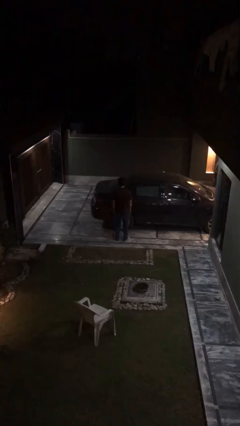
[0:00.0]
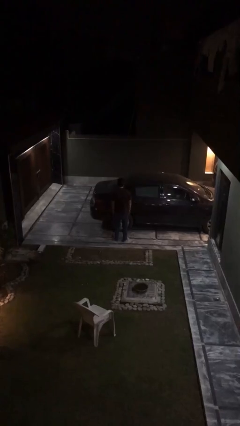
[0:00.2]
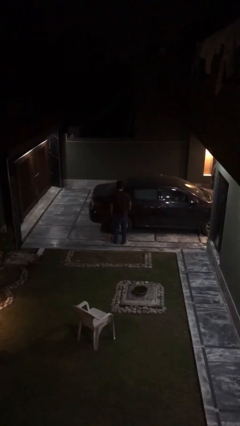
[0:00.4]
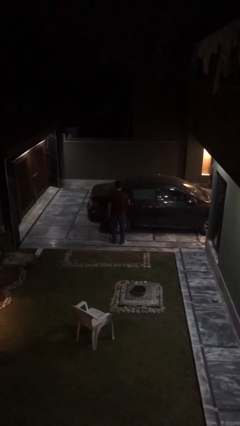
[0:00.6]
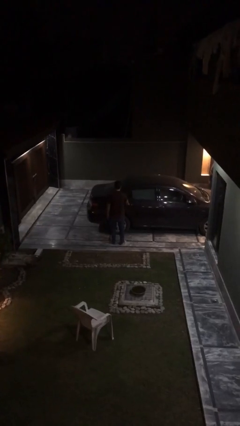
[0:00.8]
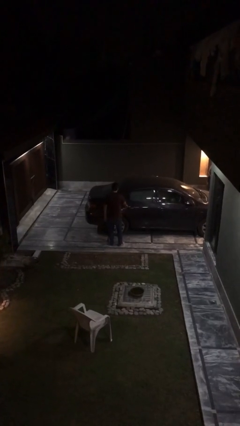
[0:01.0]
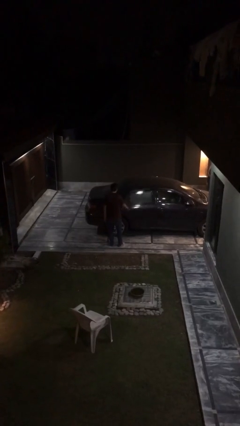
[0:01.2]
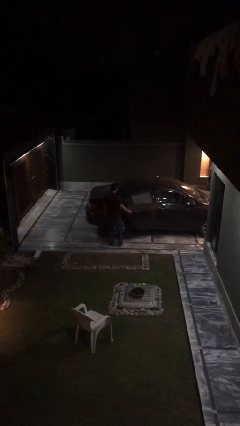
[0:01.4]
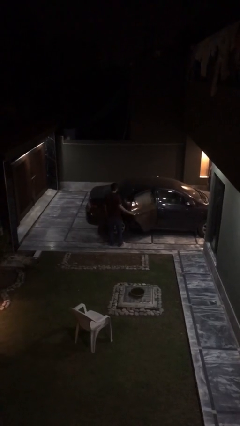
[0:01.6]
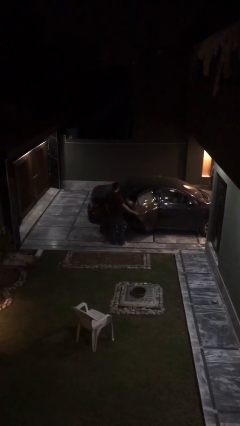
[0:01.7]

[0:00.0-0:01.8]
person opens car door

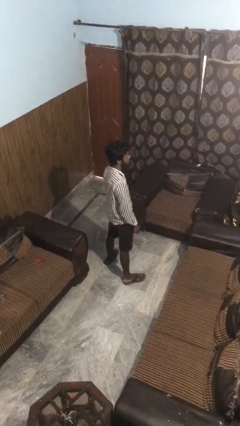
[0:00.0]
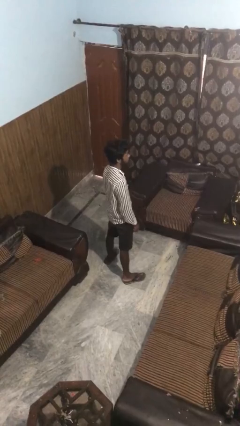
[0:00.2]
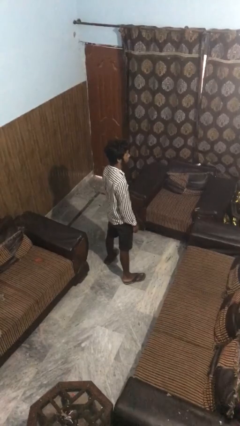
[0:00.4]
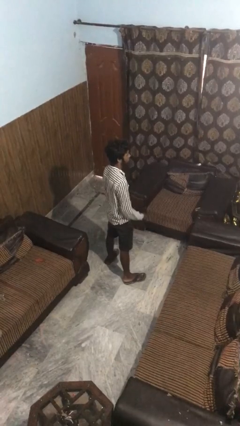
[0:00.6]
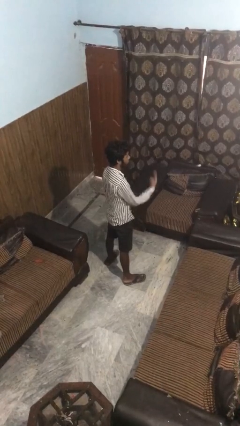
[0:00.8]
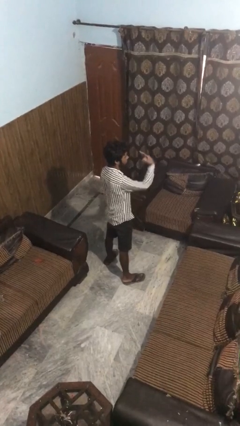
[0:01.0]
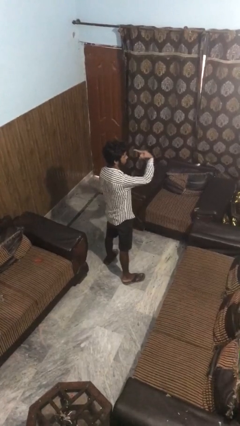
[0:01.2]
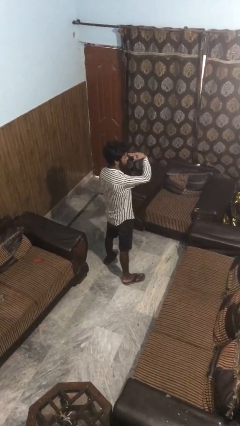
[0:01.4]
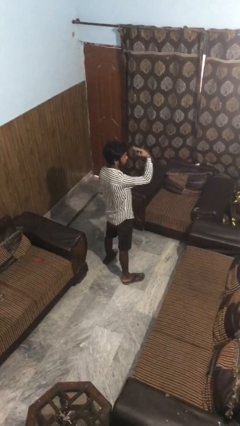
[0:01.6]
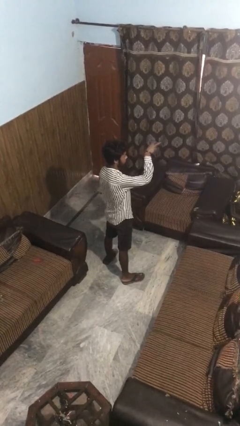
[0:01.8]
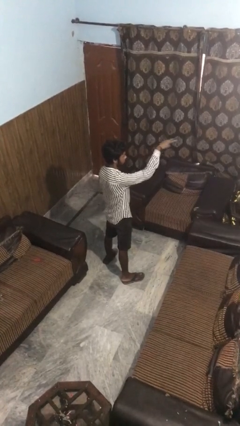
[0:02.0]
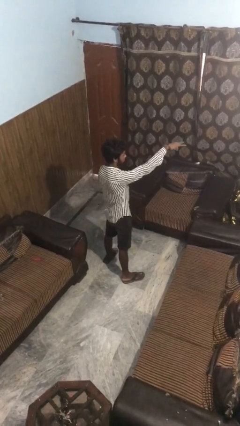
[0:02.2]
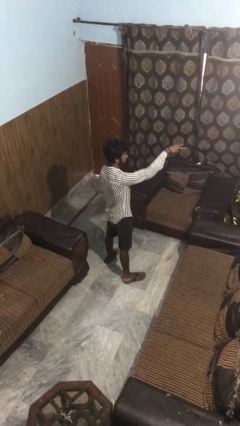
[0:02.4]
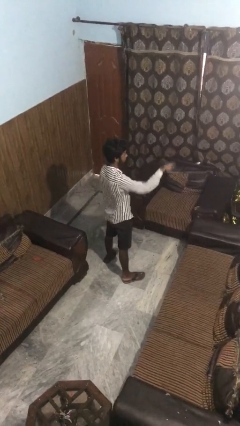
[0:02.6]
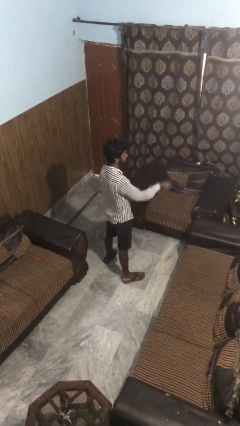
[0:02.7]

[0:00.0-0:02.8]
person gestures watch closely

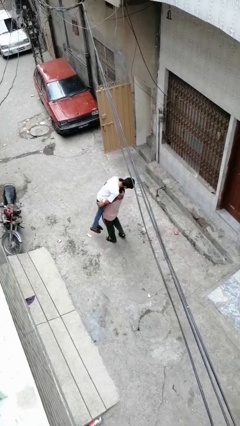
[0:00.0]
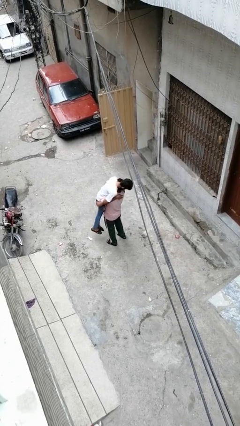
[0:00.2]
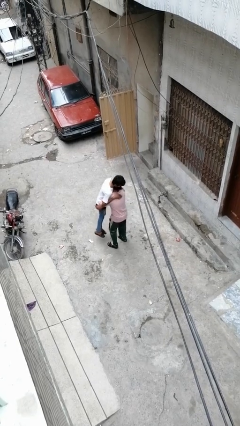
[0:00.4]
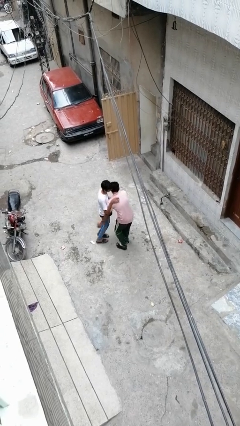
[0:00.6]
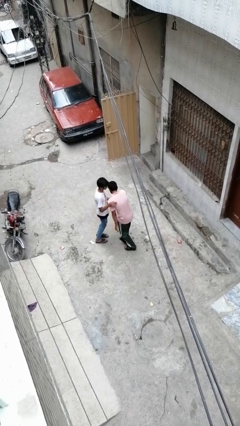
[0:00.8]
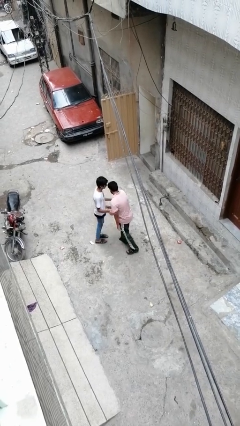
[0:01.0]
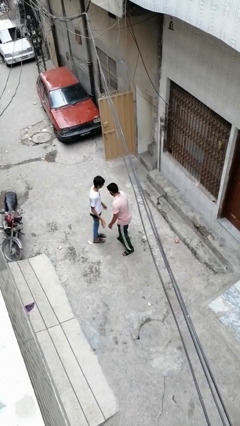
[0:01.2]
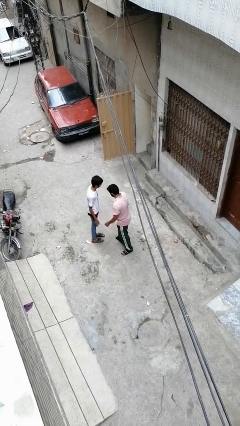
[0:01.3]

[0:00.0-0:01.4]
person puts down person

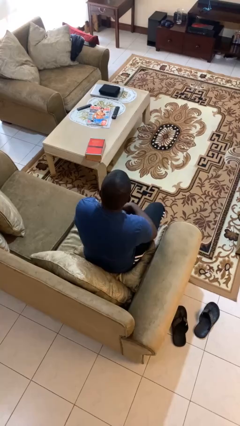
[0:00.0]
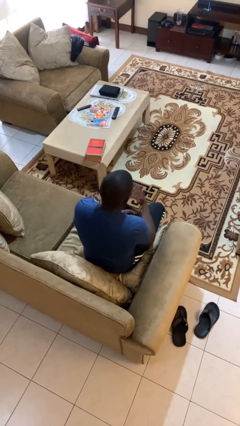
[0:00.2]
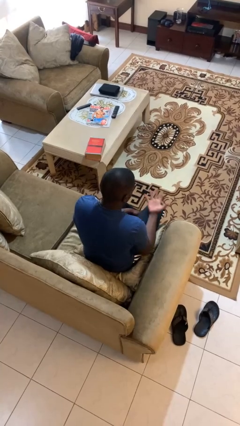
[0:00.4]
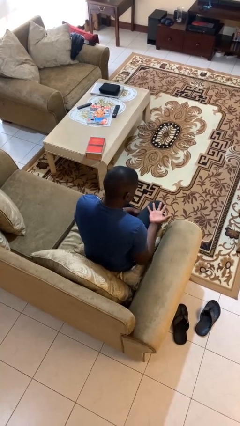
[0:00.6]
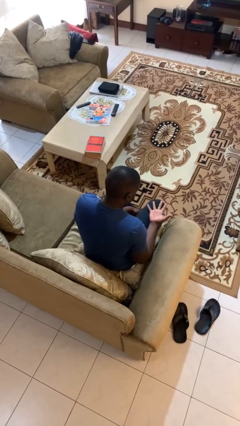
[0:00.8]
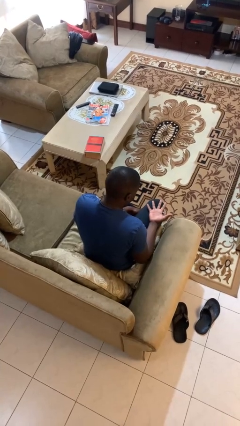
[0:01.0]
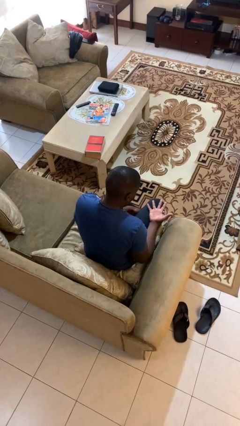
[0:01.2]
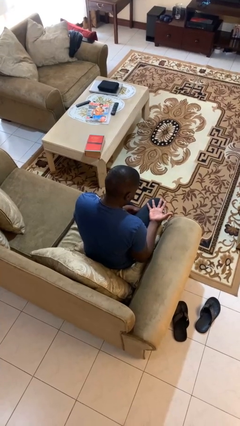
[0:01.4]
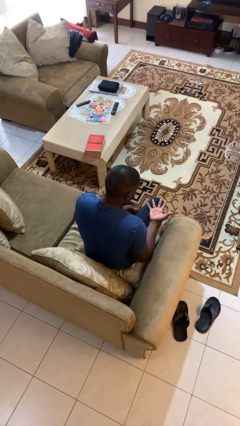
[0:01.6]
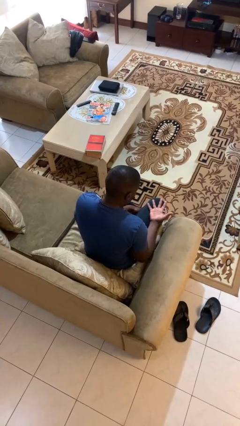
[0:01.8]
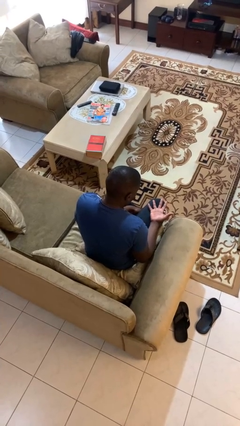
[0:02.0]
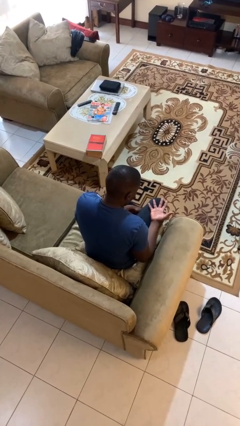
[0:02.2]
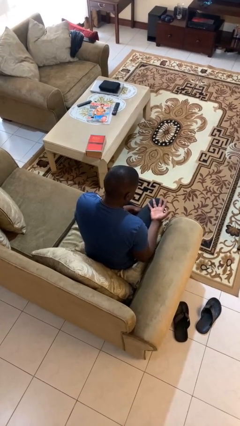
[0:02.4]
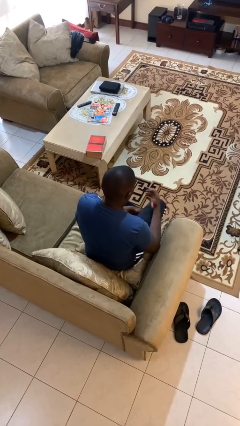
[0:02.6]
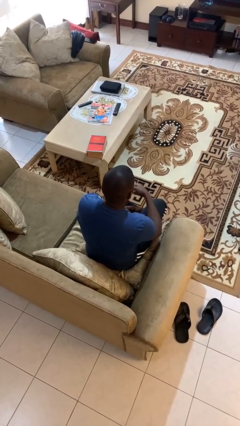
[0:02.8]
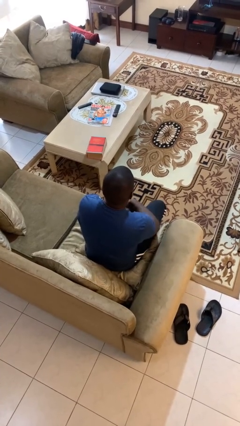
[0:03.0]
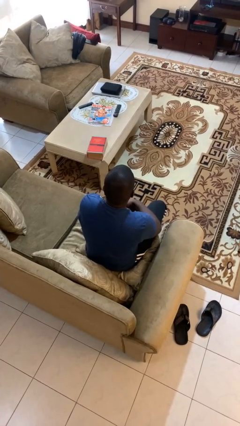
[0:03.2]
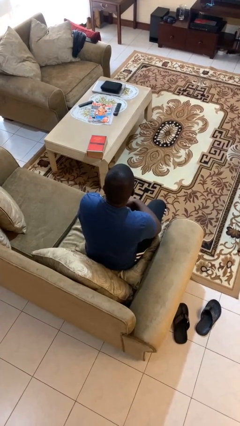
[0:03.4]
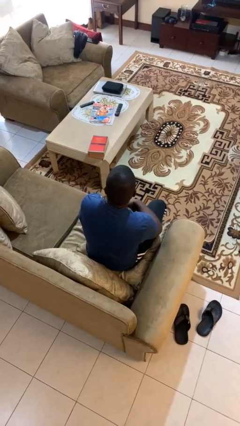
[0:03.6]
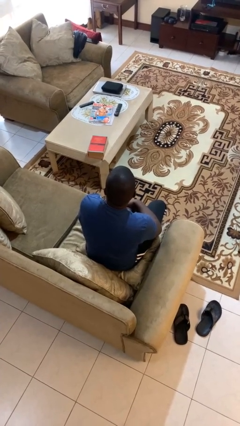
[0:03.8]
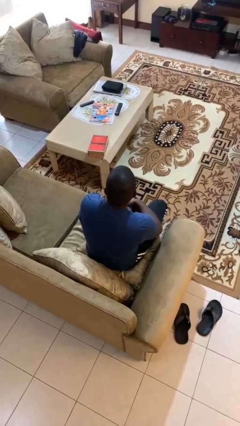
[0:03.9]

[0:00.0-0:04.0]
person looks at hands in lap

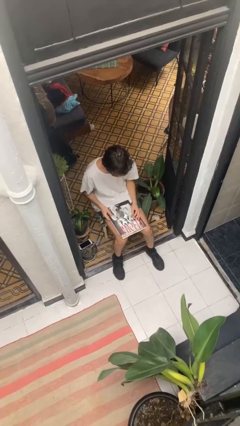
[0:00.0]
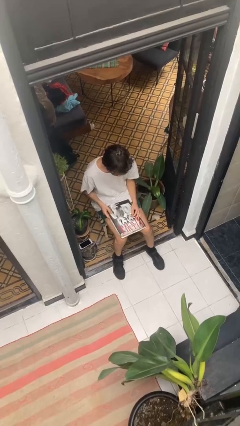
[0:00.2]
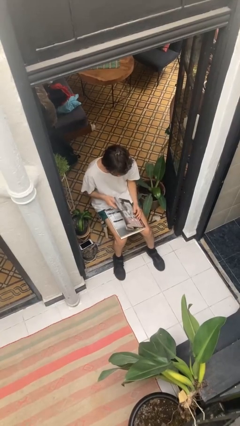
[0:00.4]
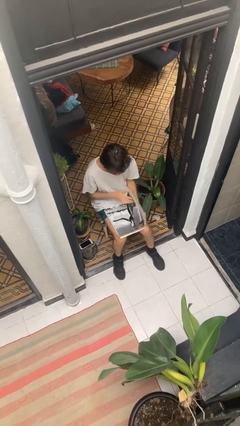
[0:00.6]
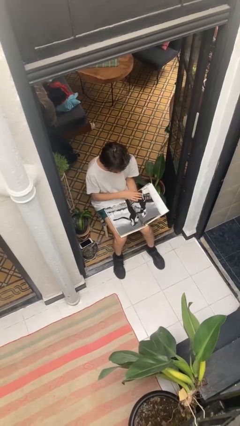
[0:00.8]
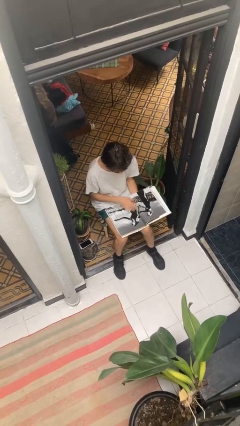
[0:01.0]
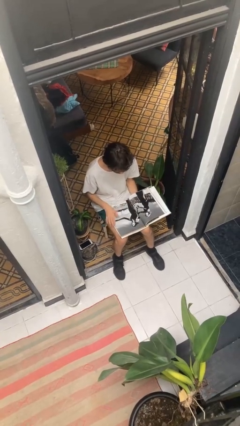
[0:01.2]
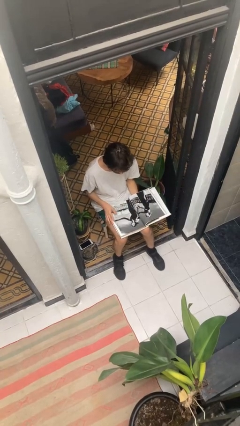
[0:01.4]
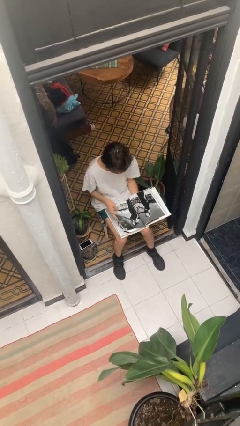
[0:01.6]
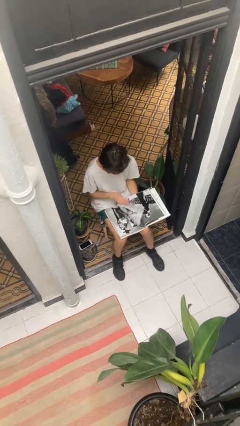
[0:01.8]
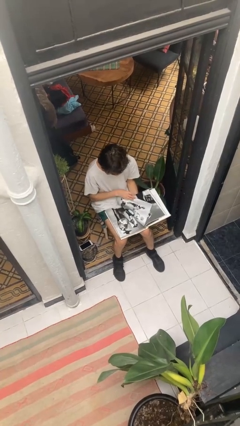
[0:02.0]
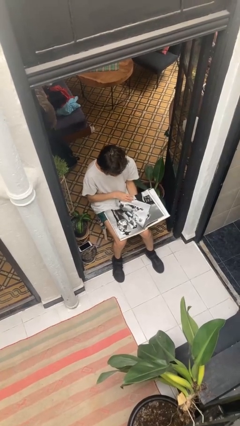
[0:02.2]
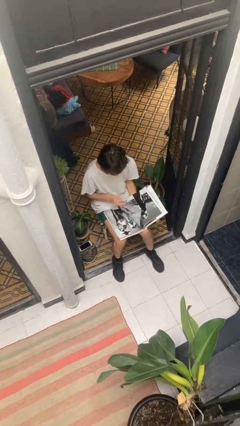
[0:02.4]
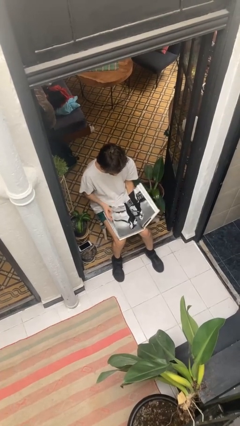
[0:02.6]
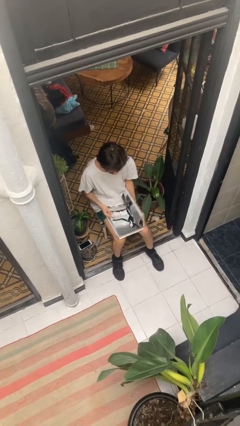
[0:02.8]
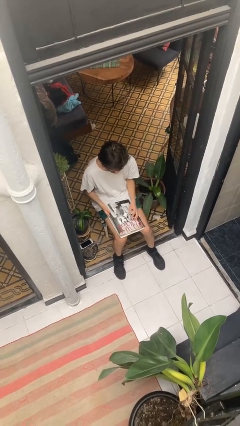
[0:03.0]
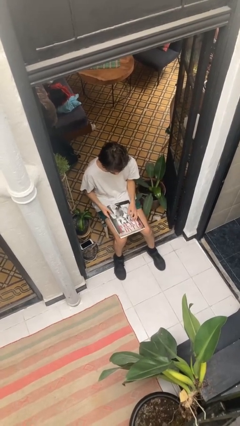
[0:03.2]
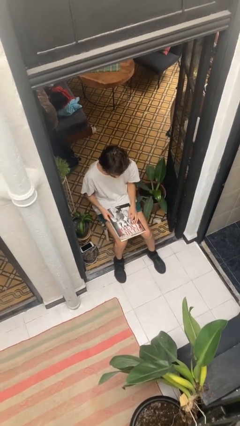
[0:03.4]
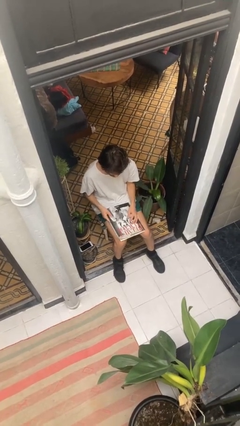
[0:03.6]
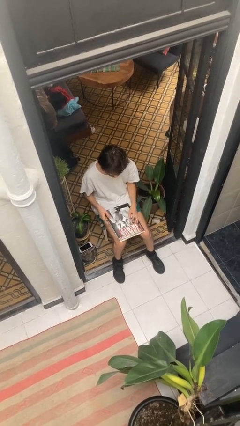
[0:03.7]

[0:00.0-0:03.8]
person reads document

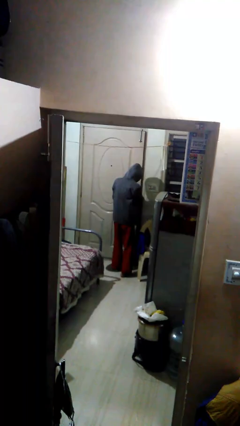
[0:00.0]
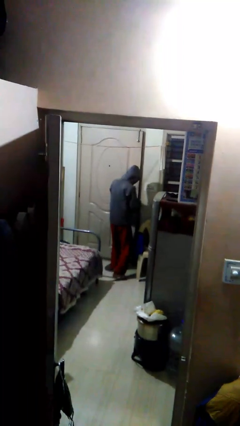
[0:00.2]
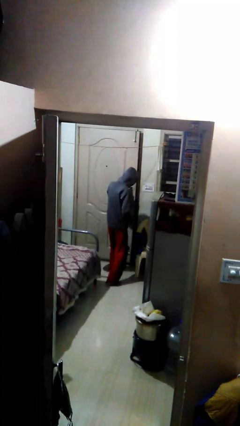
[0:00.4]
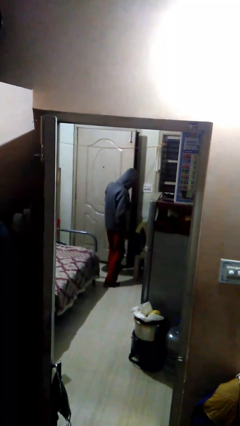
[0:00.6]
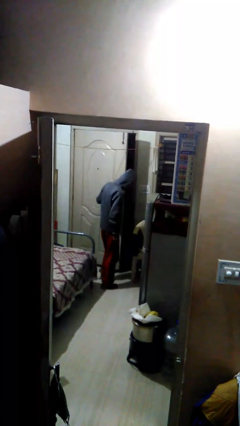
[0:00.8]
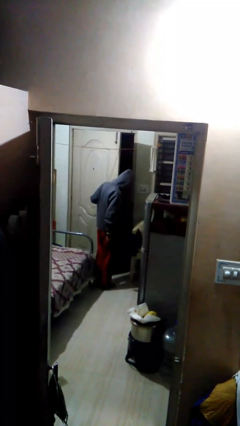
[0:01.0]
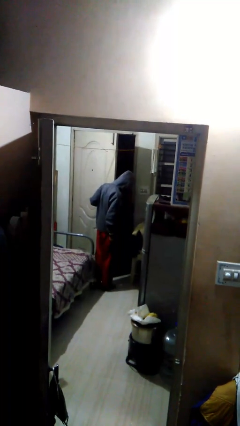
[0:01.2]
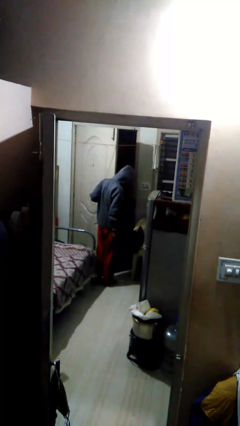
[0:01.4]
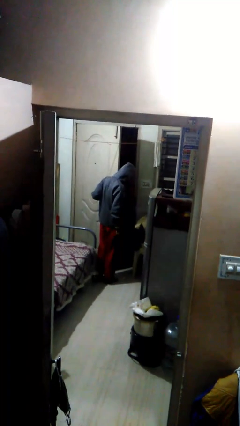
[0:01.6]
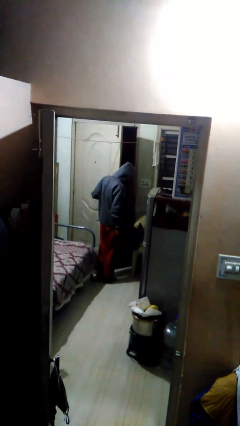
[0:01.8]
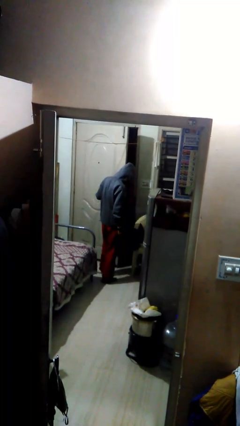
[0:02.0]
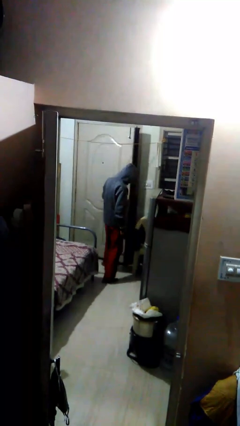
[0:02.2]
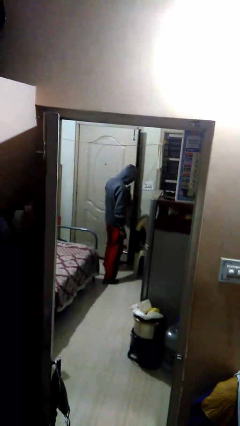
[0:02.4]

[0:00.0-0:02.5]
person opens facility door

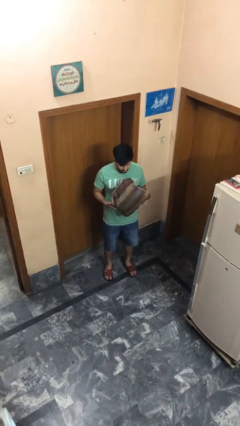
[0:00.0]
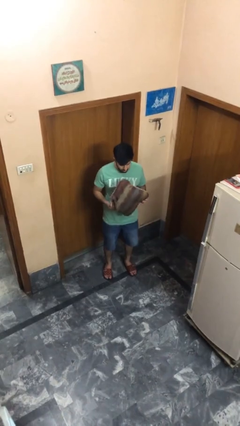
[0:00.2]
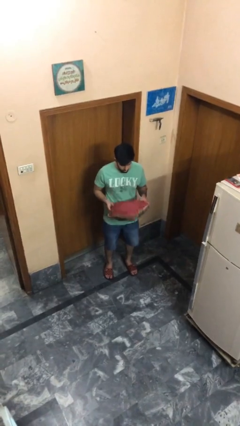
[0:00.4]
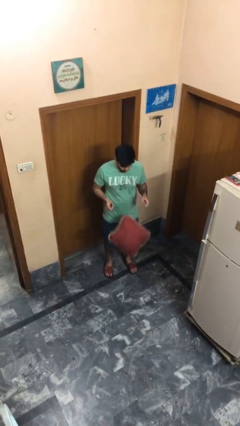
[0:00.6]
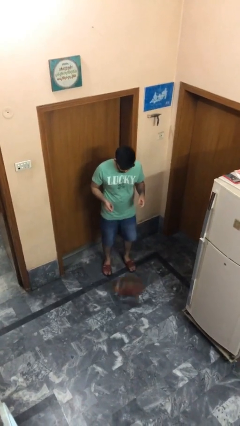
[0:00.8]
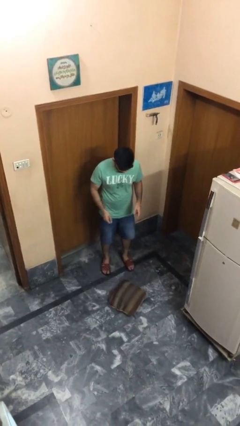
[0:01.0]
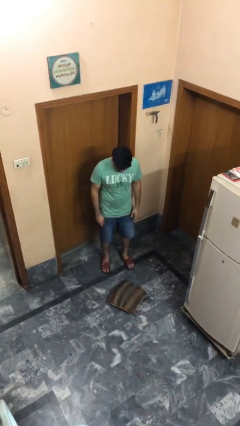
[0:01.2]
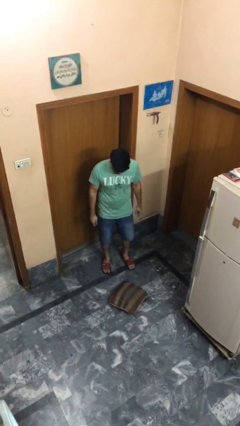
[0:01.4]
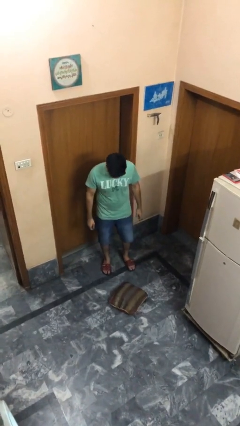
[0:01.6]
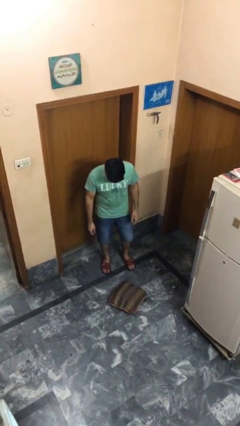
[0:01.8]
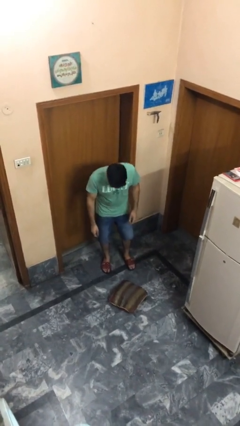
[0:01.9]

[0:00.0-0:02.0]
person drops object
